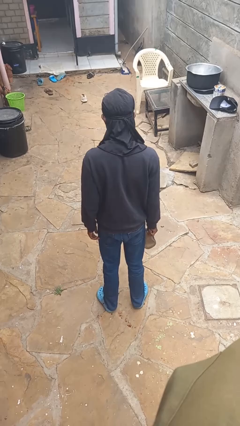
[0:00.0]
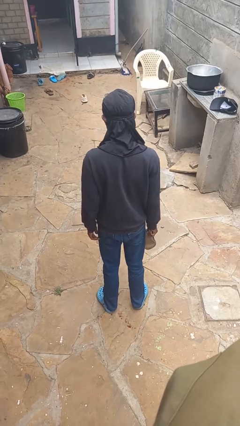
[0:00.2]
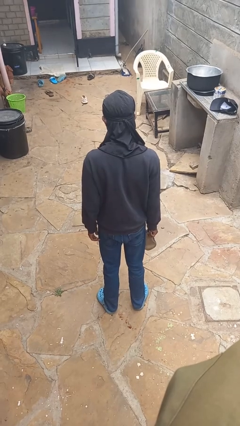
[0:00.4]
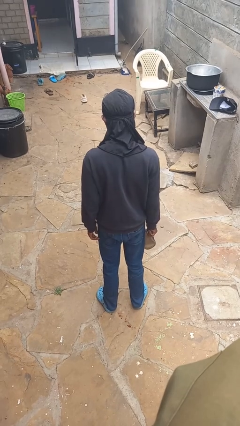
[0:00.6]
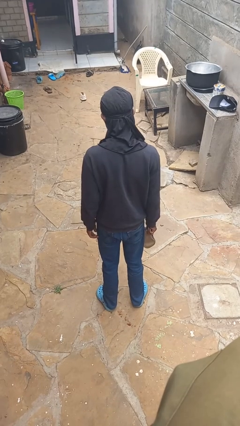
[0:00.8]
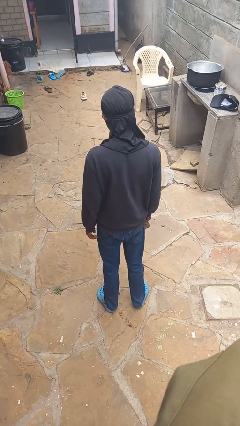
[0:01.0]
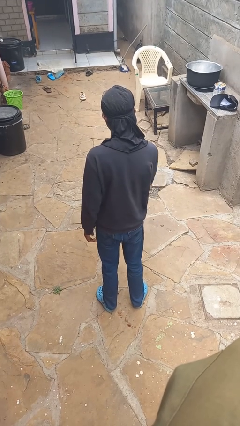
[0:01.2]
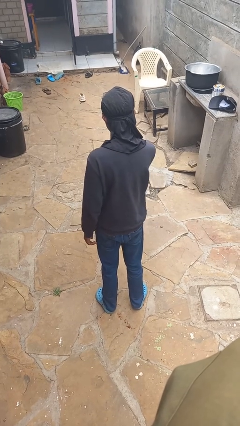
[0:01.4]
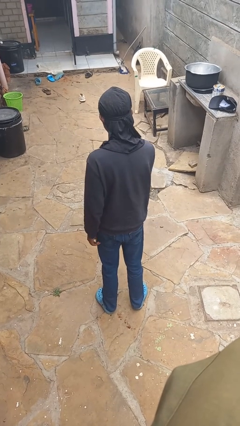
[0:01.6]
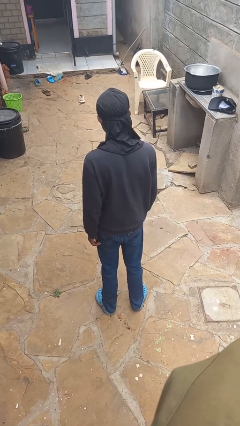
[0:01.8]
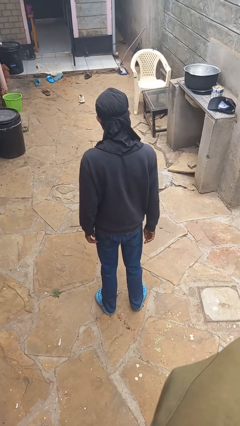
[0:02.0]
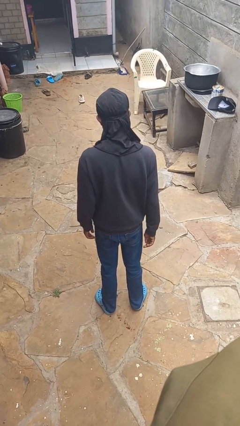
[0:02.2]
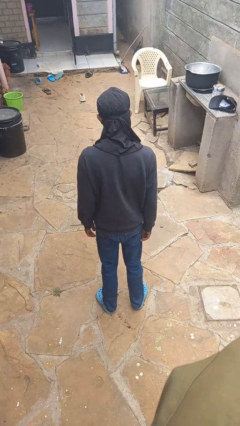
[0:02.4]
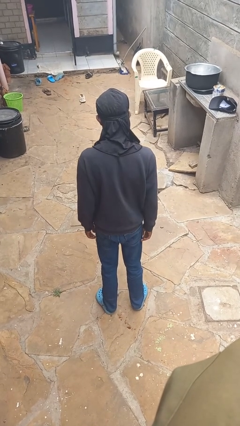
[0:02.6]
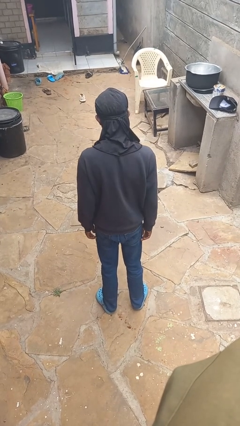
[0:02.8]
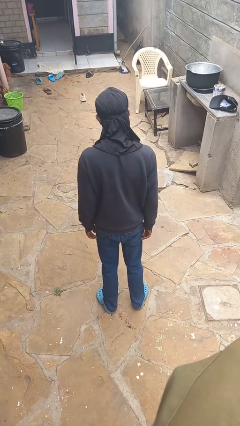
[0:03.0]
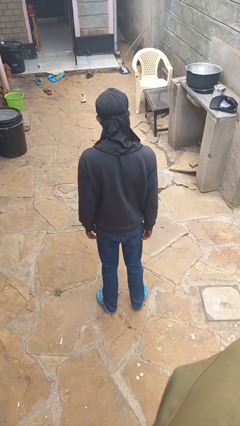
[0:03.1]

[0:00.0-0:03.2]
person throws object to ground

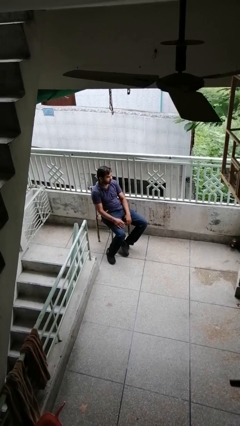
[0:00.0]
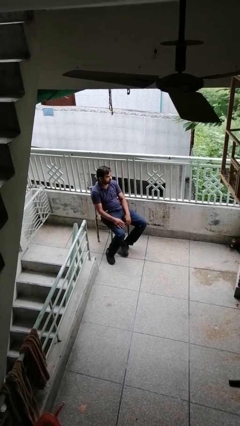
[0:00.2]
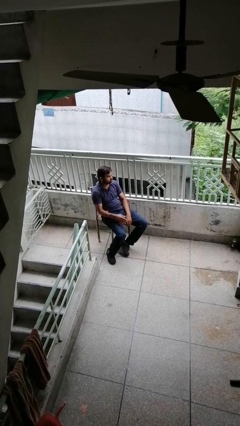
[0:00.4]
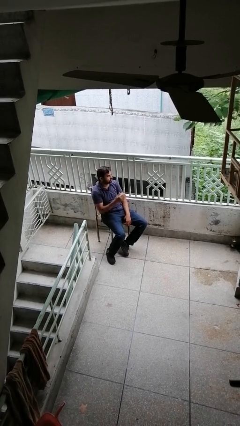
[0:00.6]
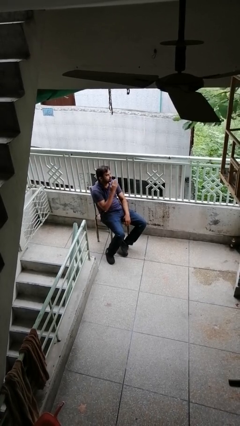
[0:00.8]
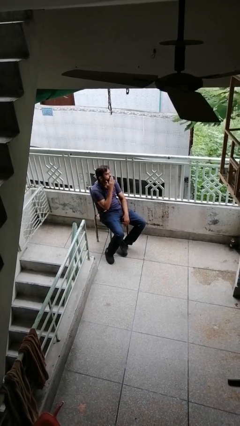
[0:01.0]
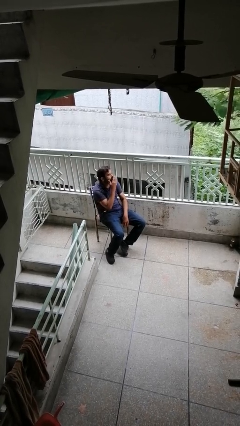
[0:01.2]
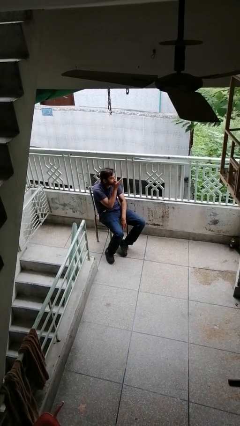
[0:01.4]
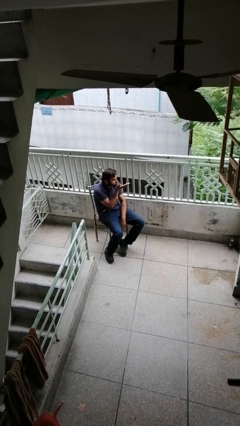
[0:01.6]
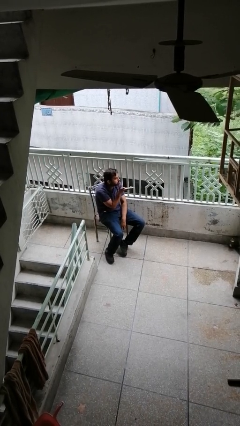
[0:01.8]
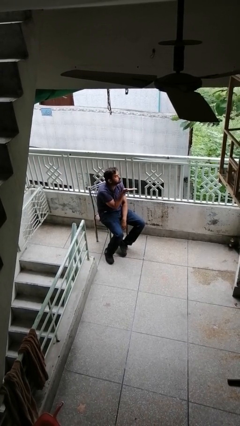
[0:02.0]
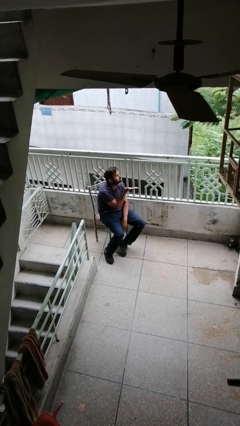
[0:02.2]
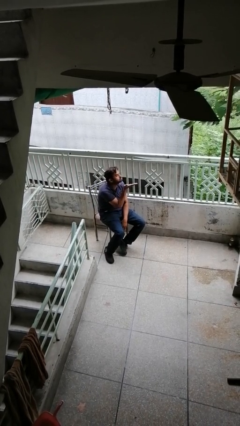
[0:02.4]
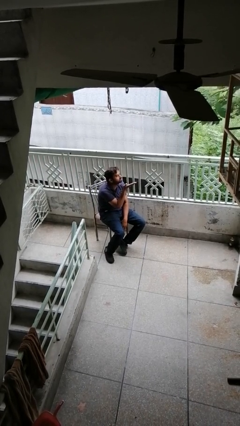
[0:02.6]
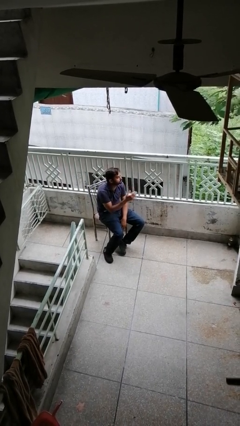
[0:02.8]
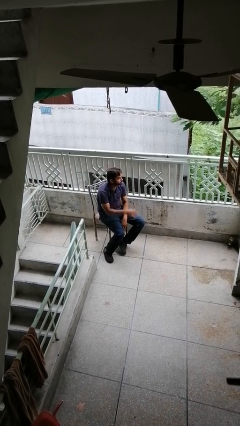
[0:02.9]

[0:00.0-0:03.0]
person gestures blow kiss

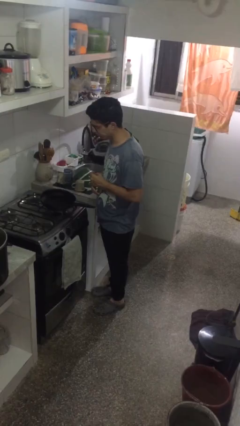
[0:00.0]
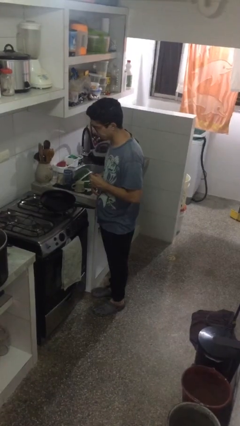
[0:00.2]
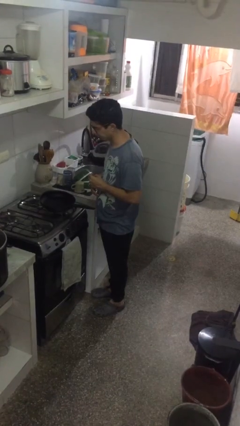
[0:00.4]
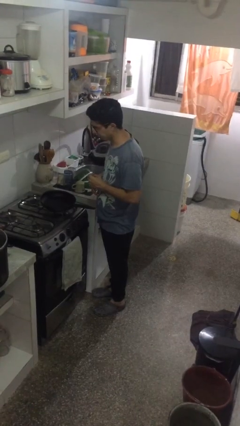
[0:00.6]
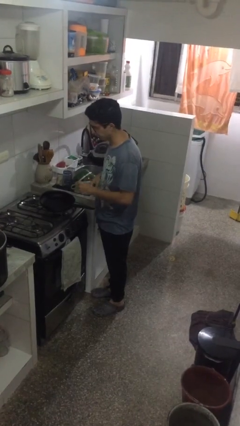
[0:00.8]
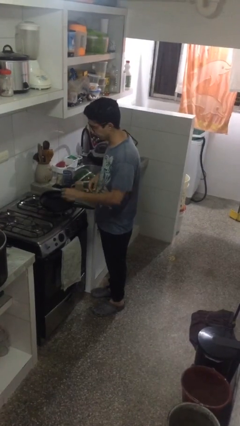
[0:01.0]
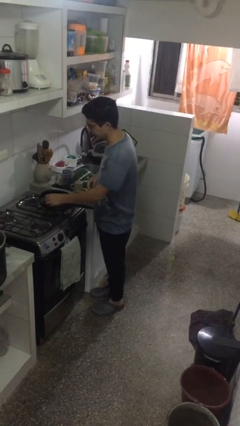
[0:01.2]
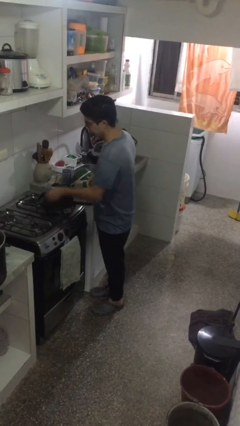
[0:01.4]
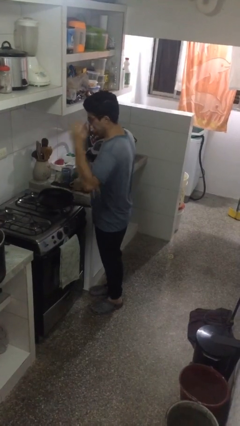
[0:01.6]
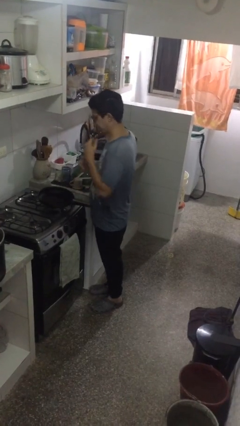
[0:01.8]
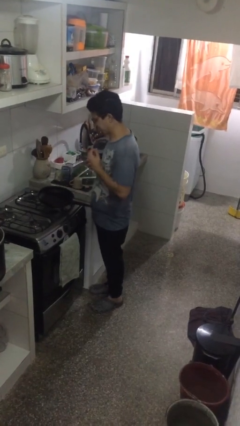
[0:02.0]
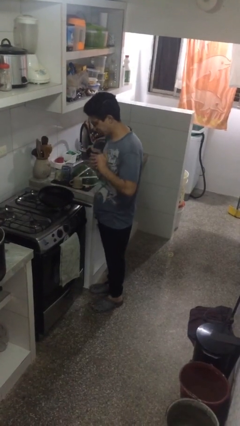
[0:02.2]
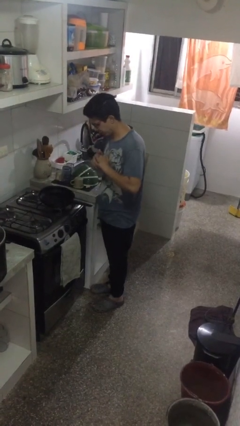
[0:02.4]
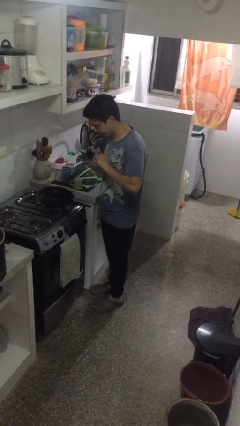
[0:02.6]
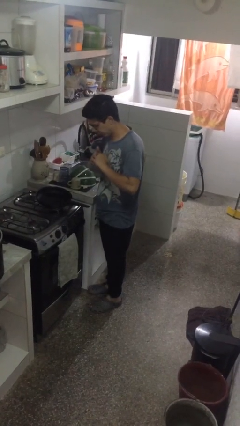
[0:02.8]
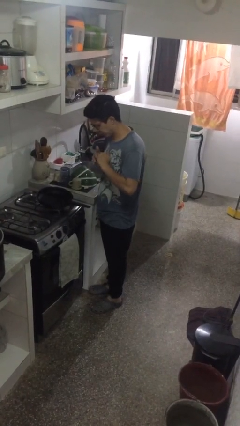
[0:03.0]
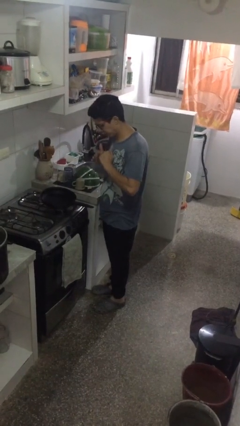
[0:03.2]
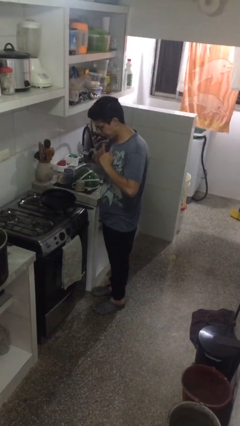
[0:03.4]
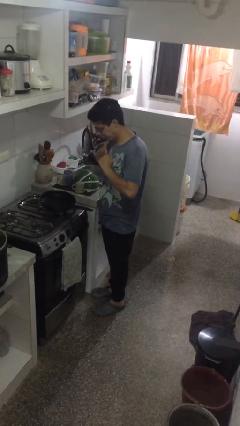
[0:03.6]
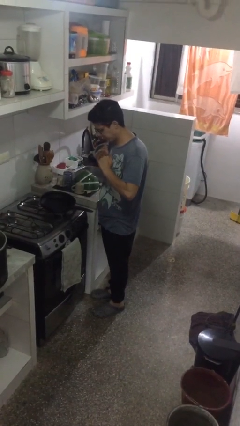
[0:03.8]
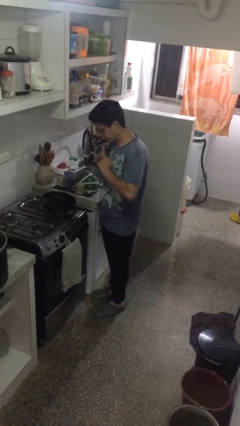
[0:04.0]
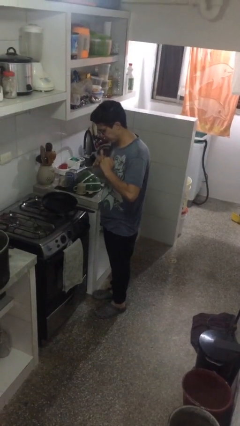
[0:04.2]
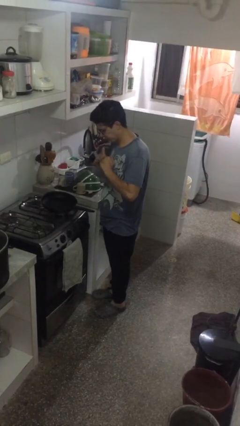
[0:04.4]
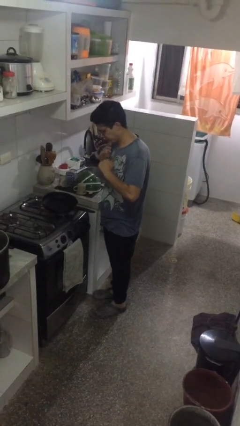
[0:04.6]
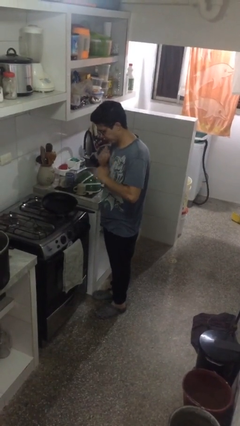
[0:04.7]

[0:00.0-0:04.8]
person burns hand

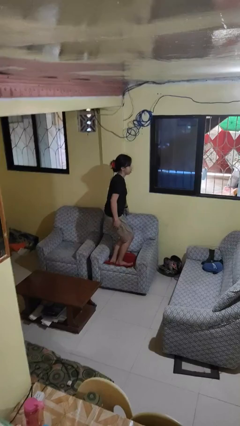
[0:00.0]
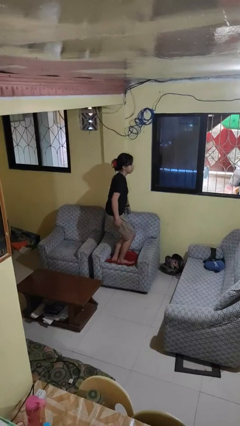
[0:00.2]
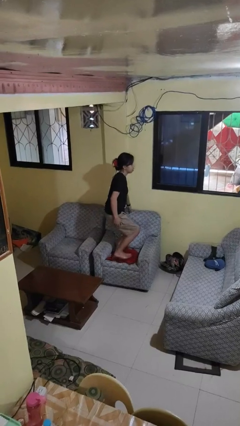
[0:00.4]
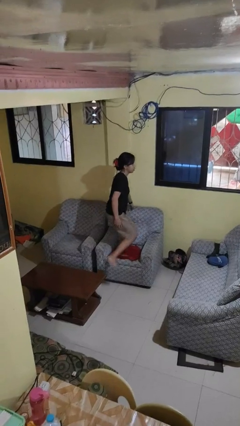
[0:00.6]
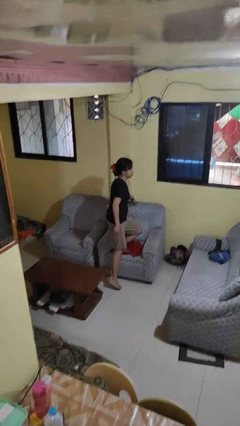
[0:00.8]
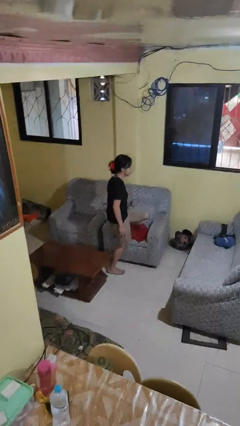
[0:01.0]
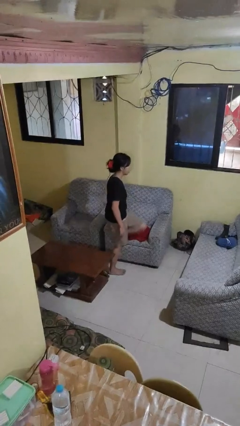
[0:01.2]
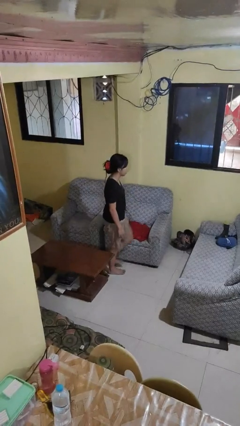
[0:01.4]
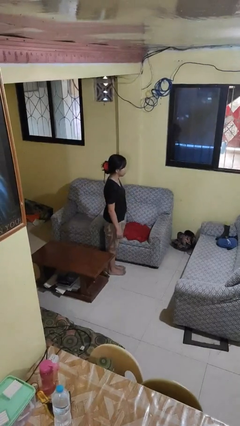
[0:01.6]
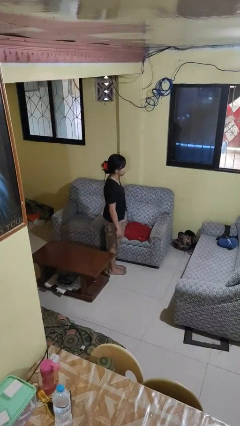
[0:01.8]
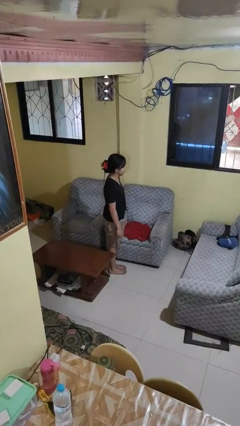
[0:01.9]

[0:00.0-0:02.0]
person climbs off couch

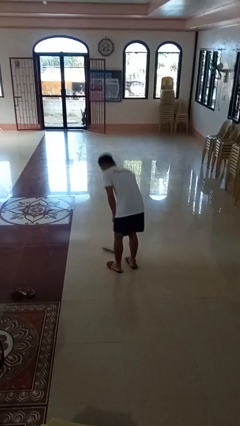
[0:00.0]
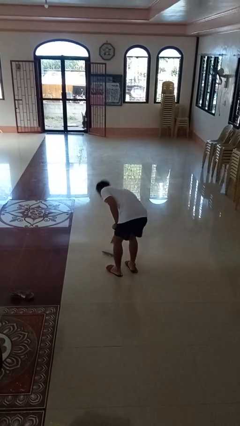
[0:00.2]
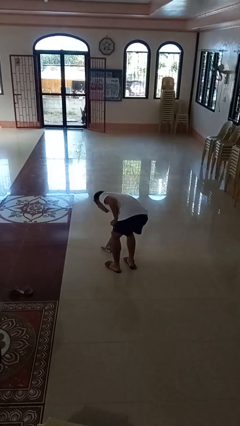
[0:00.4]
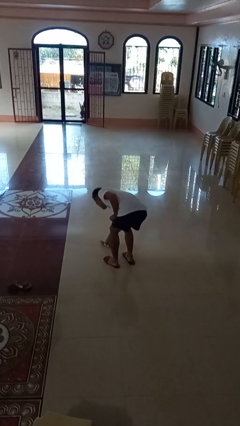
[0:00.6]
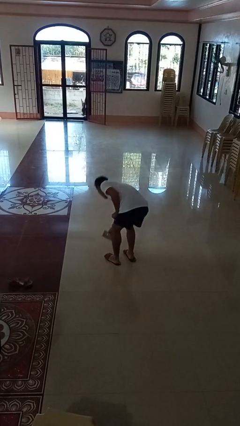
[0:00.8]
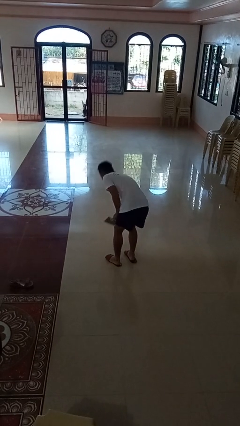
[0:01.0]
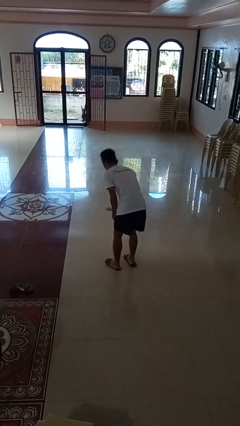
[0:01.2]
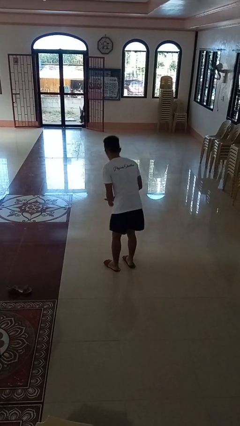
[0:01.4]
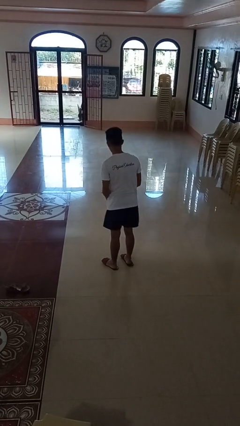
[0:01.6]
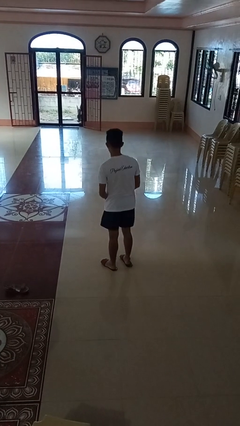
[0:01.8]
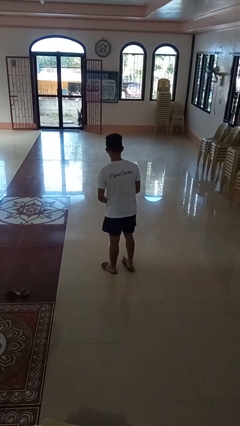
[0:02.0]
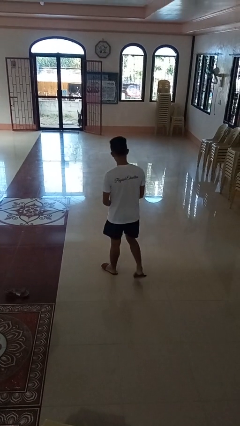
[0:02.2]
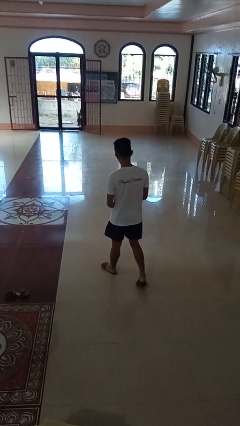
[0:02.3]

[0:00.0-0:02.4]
person picks up object from floor

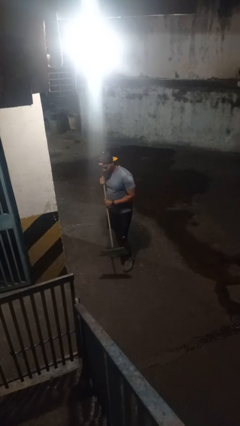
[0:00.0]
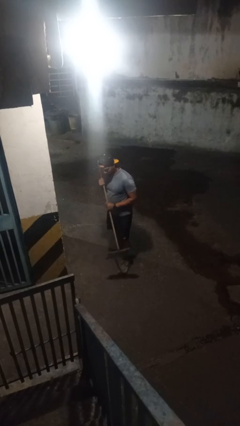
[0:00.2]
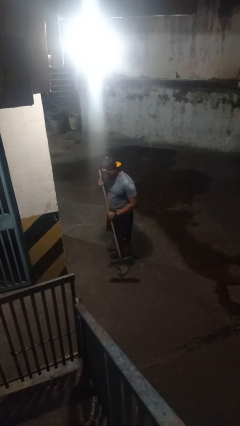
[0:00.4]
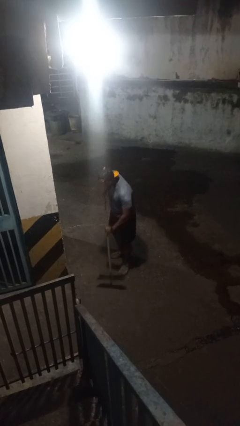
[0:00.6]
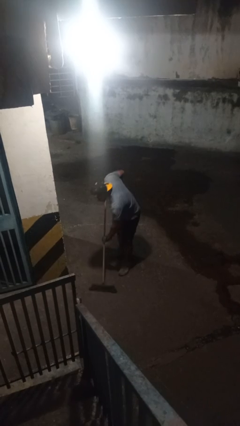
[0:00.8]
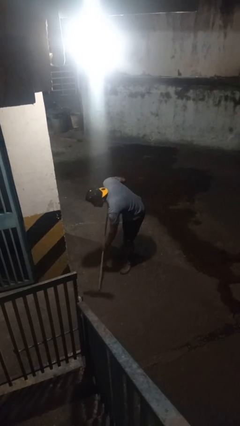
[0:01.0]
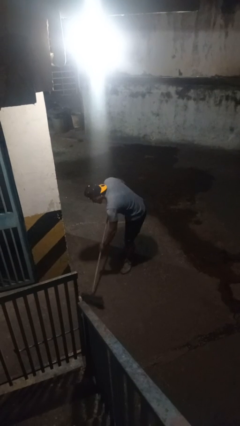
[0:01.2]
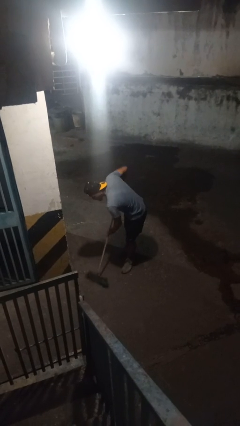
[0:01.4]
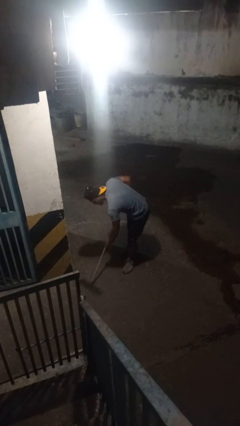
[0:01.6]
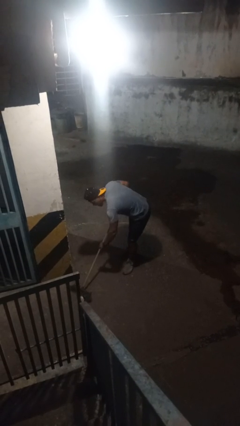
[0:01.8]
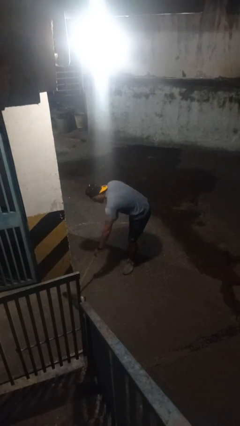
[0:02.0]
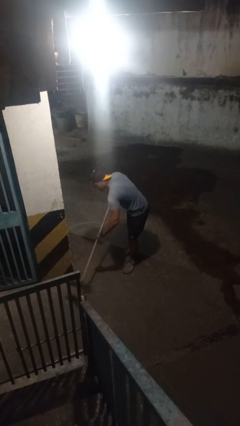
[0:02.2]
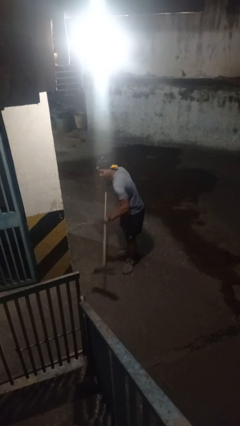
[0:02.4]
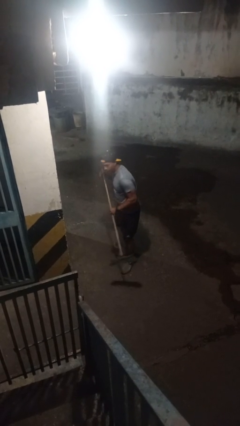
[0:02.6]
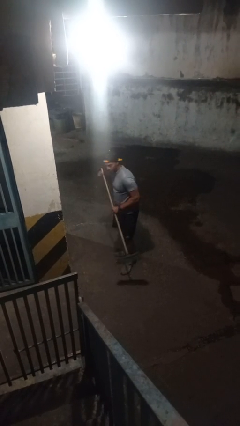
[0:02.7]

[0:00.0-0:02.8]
person sweeps floor
